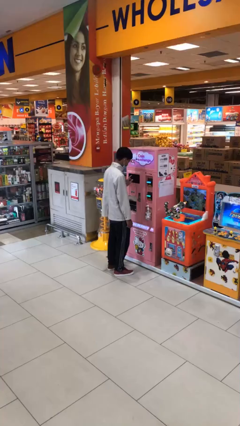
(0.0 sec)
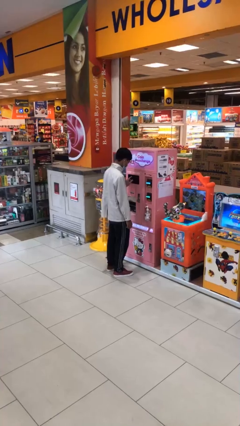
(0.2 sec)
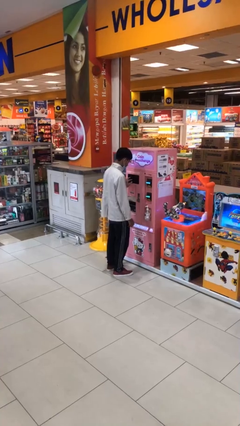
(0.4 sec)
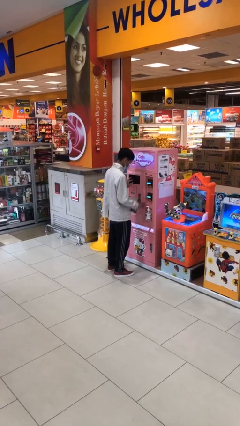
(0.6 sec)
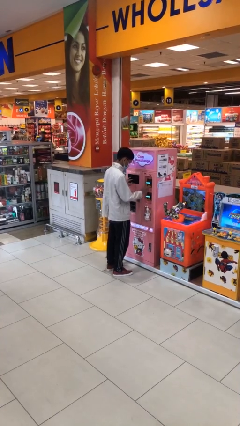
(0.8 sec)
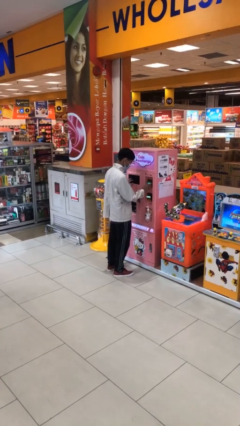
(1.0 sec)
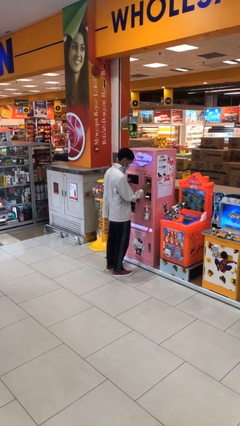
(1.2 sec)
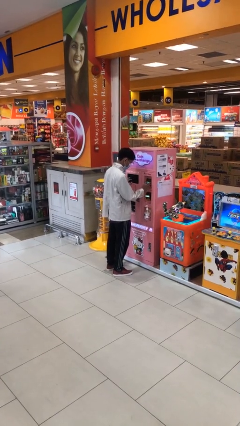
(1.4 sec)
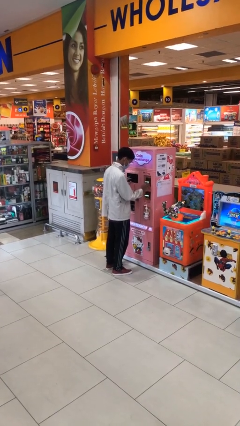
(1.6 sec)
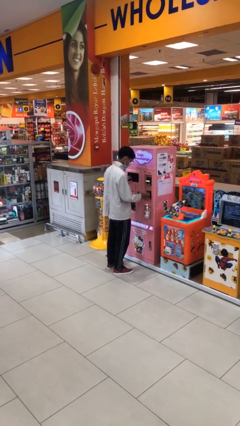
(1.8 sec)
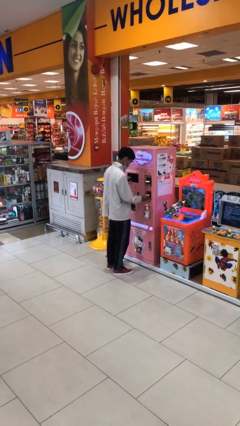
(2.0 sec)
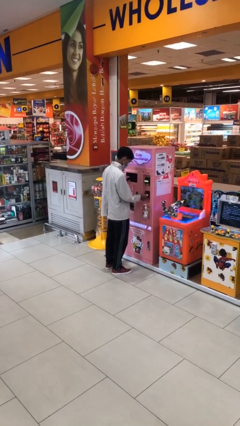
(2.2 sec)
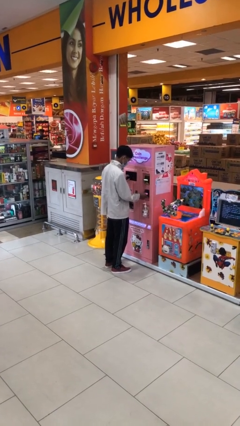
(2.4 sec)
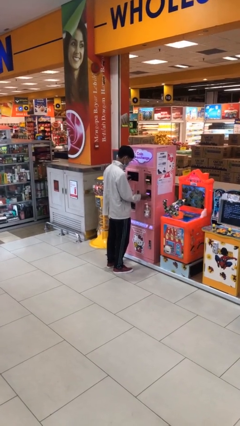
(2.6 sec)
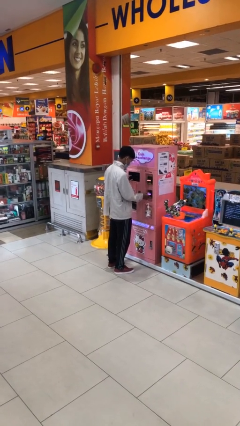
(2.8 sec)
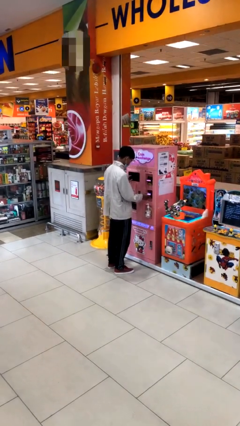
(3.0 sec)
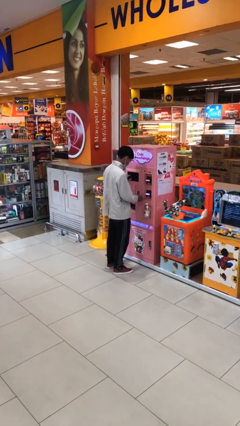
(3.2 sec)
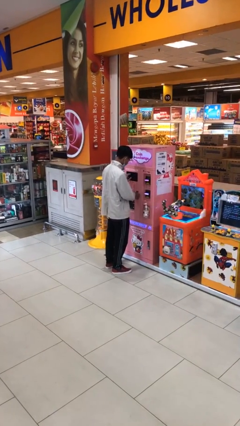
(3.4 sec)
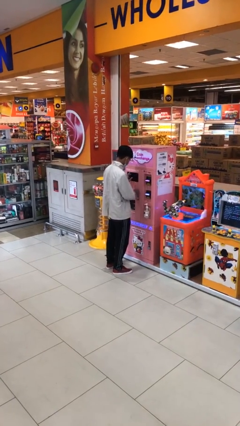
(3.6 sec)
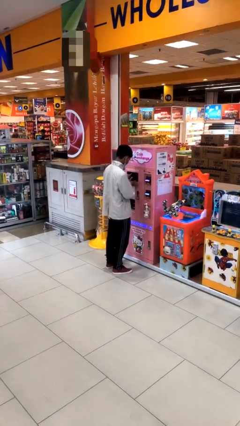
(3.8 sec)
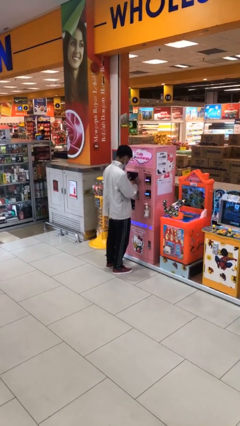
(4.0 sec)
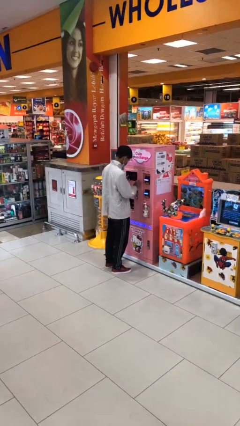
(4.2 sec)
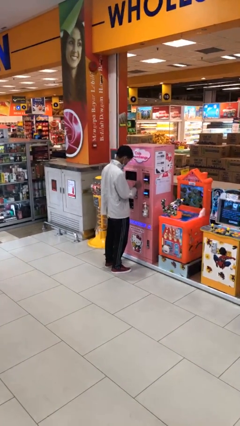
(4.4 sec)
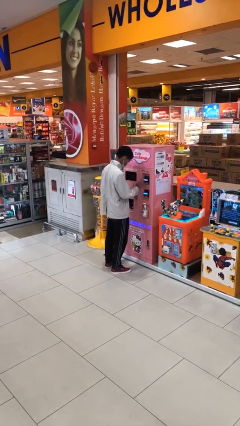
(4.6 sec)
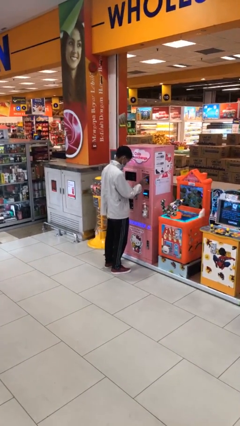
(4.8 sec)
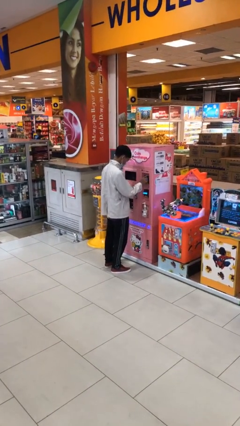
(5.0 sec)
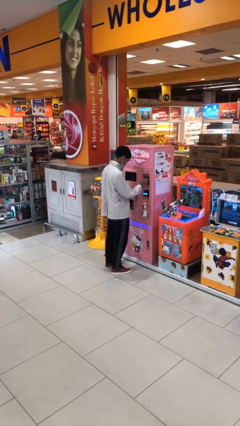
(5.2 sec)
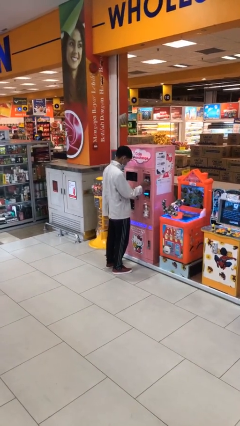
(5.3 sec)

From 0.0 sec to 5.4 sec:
person purchases from machine

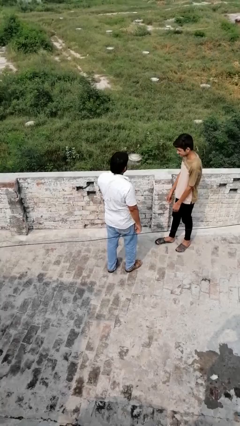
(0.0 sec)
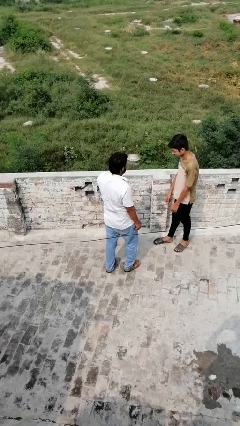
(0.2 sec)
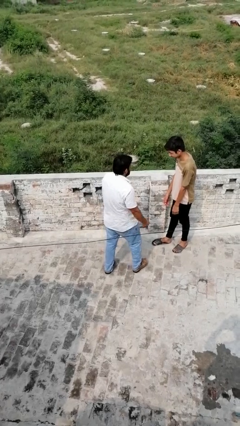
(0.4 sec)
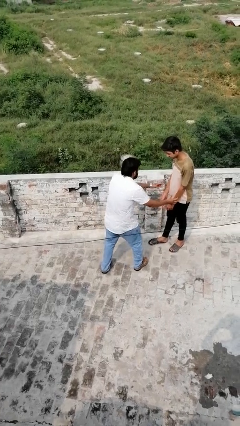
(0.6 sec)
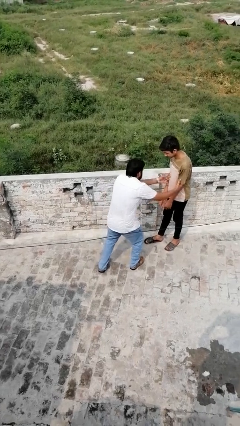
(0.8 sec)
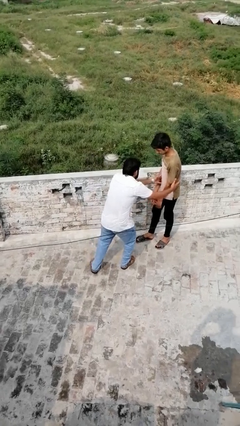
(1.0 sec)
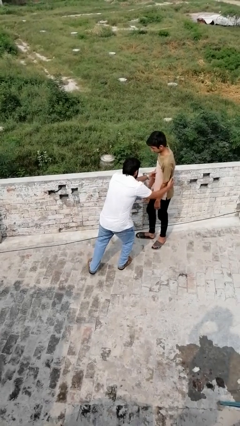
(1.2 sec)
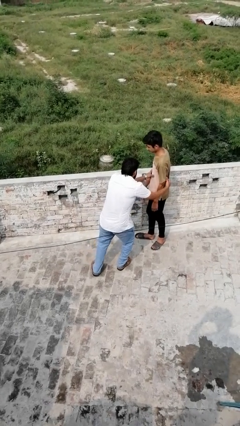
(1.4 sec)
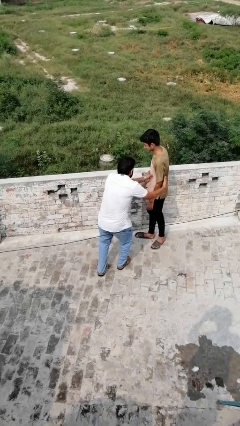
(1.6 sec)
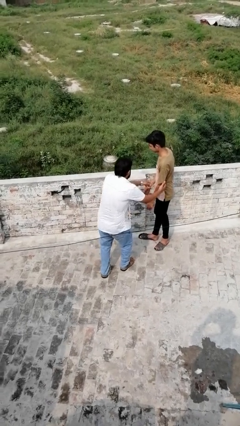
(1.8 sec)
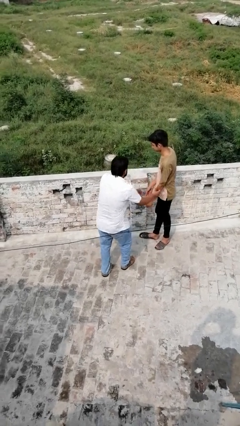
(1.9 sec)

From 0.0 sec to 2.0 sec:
person tickles person

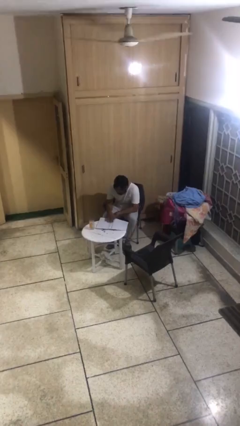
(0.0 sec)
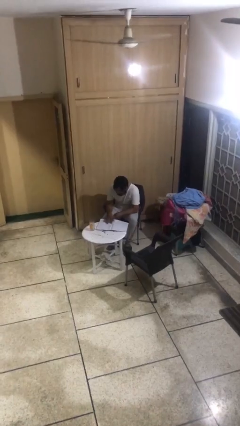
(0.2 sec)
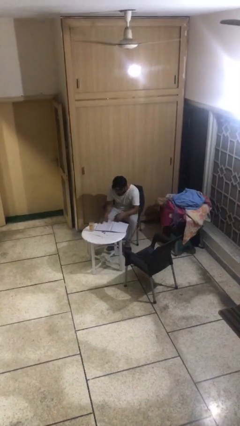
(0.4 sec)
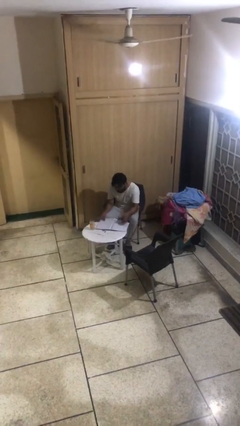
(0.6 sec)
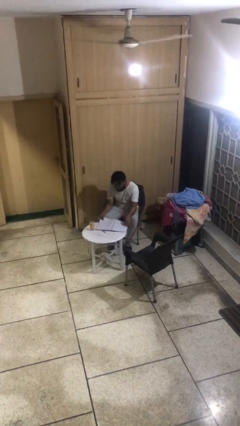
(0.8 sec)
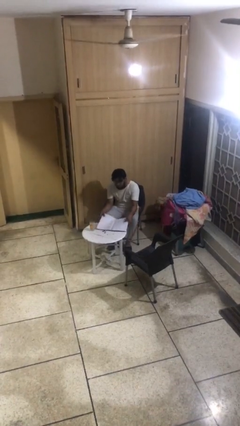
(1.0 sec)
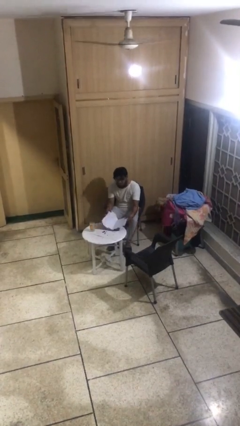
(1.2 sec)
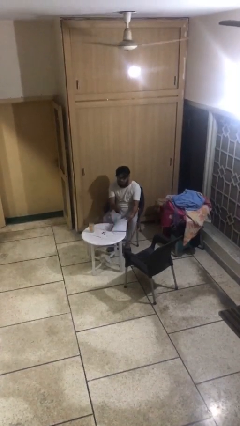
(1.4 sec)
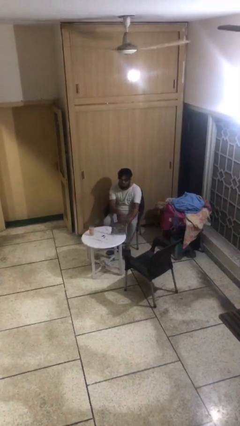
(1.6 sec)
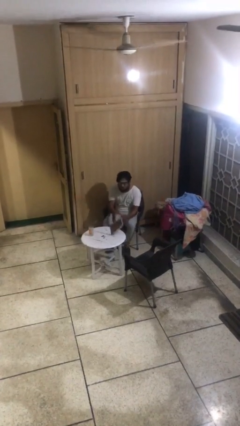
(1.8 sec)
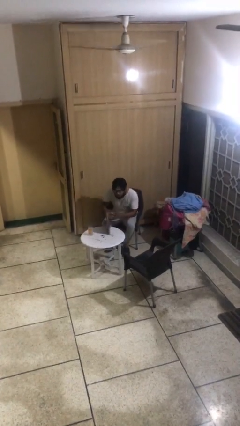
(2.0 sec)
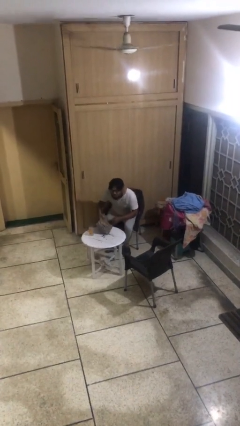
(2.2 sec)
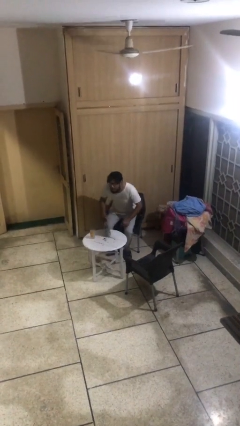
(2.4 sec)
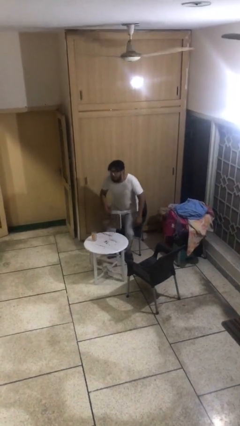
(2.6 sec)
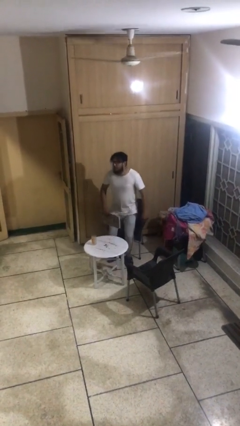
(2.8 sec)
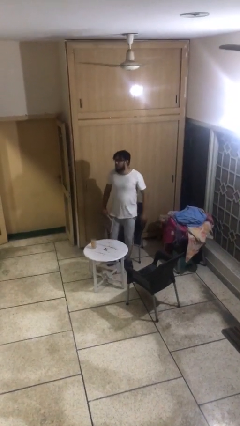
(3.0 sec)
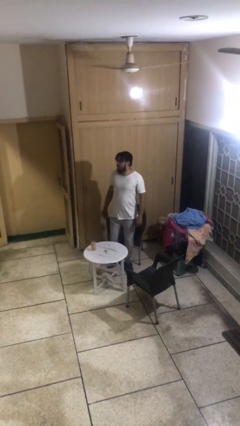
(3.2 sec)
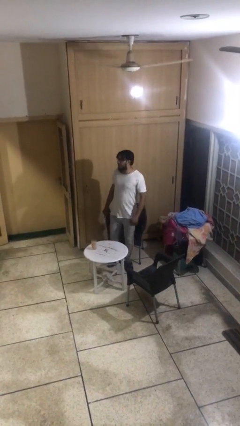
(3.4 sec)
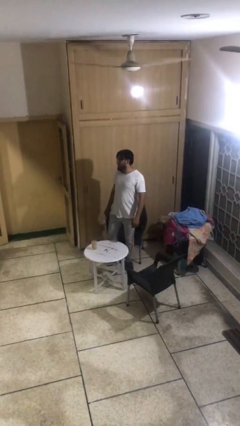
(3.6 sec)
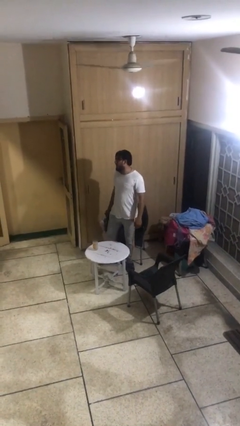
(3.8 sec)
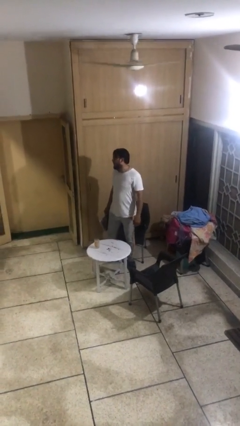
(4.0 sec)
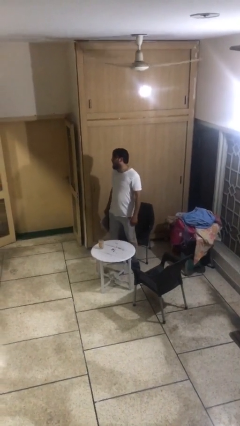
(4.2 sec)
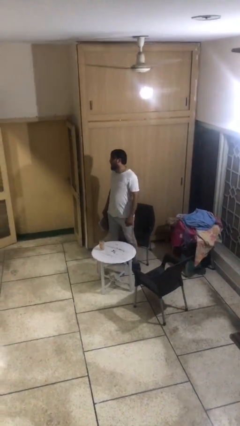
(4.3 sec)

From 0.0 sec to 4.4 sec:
person stands up

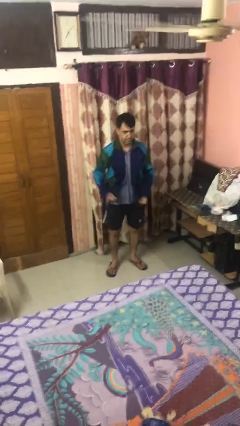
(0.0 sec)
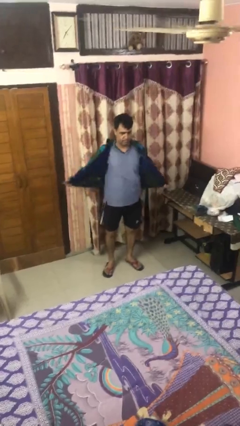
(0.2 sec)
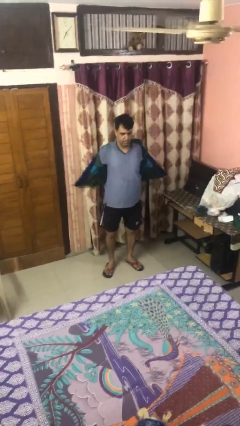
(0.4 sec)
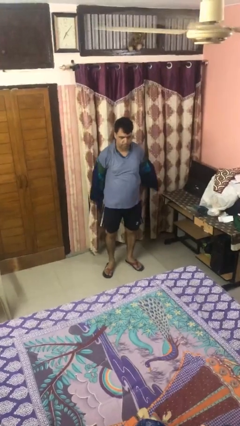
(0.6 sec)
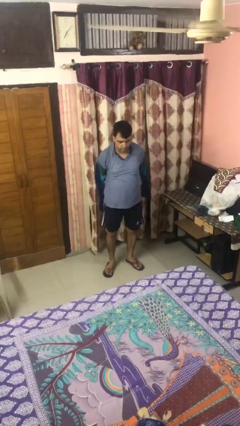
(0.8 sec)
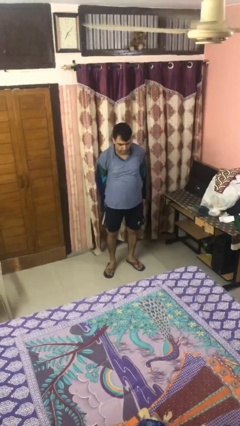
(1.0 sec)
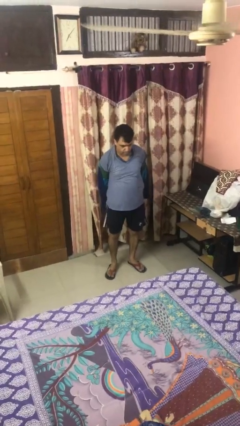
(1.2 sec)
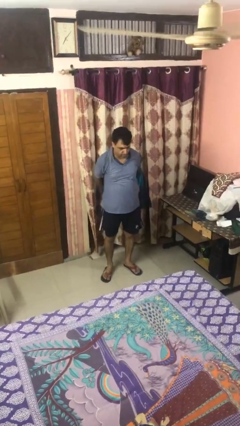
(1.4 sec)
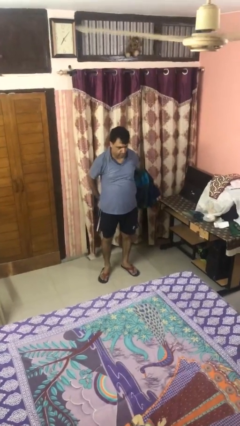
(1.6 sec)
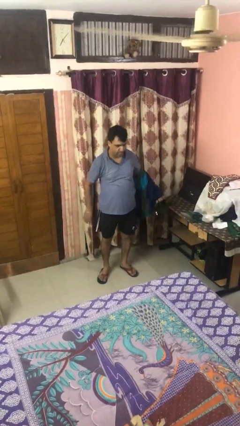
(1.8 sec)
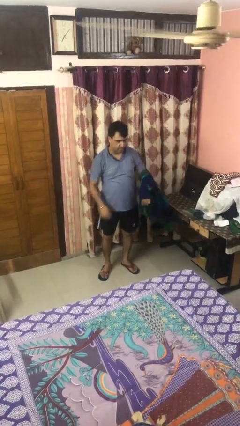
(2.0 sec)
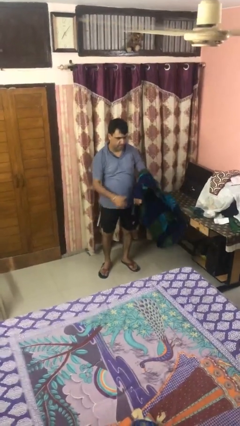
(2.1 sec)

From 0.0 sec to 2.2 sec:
person takes off jacket

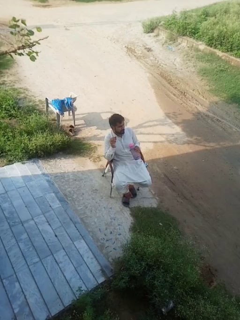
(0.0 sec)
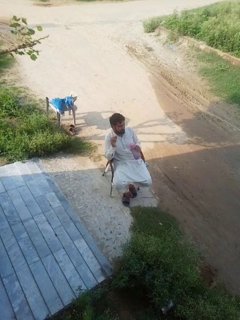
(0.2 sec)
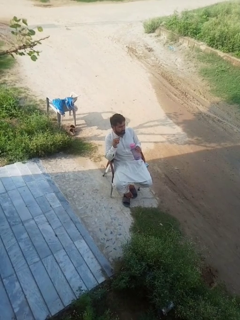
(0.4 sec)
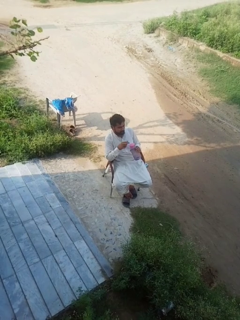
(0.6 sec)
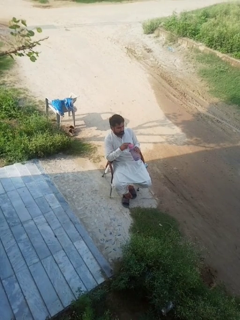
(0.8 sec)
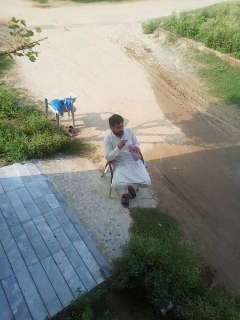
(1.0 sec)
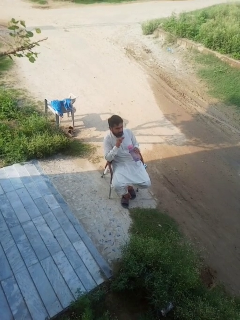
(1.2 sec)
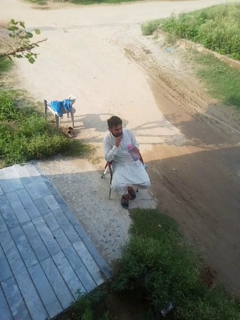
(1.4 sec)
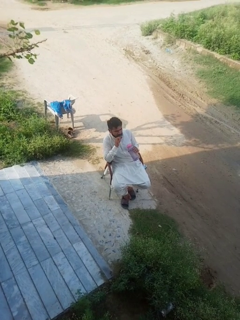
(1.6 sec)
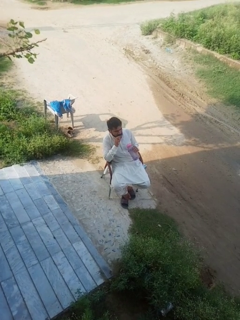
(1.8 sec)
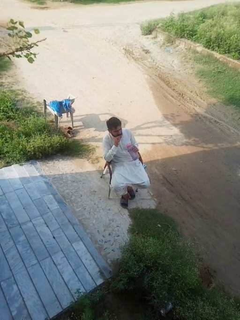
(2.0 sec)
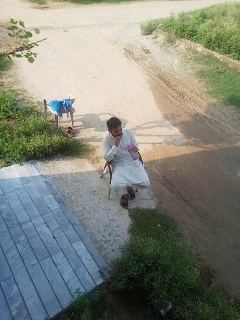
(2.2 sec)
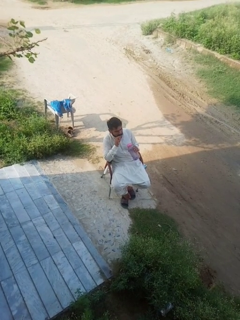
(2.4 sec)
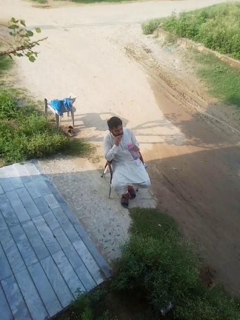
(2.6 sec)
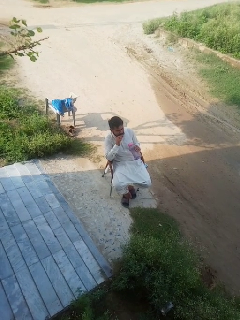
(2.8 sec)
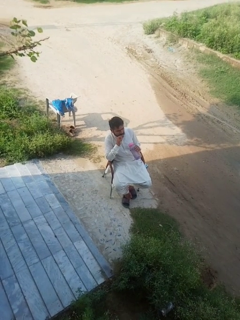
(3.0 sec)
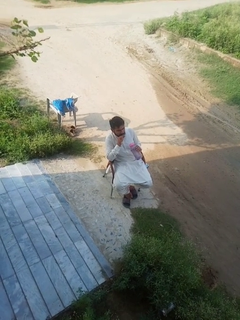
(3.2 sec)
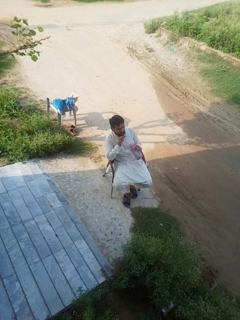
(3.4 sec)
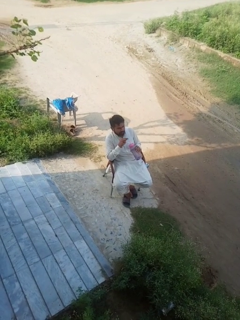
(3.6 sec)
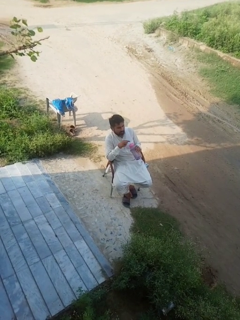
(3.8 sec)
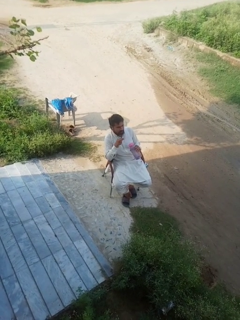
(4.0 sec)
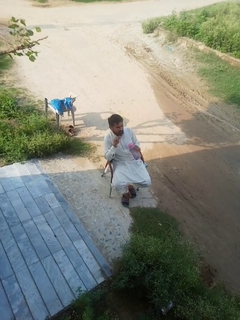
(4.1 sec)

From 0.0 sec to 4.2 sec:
person drinks from straw

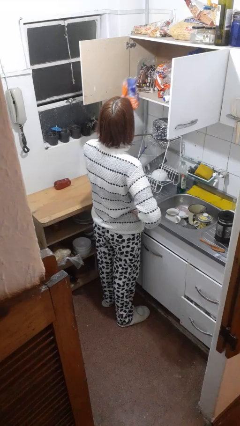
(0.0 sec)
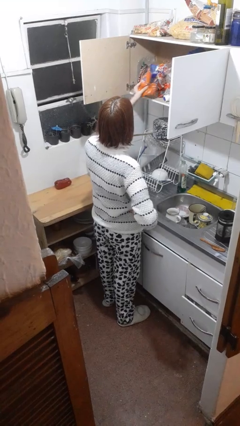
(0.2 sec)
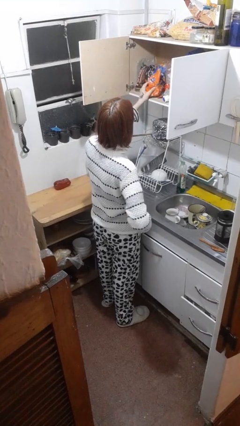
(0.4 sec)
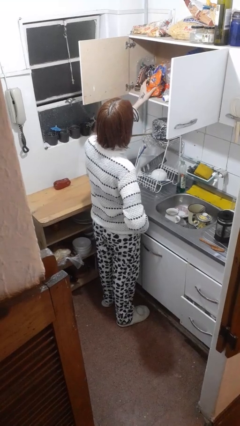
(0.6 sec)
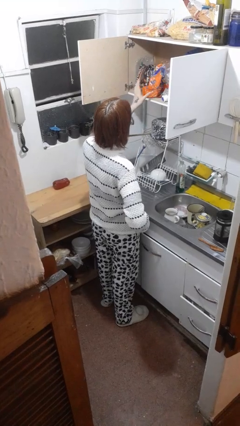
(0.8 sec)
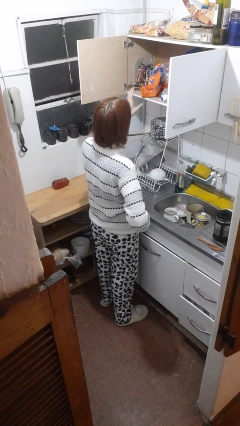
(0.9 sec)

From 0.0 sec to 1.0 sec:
person puts object in cabinet
